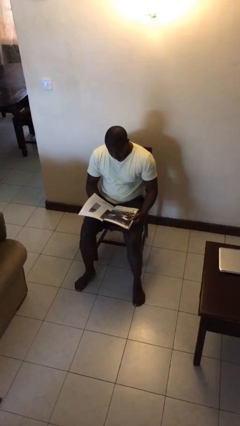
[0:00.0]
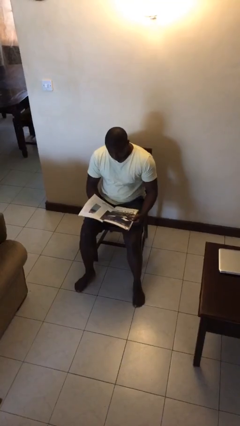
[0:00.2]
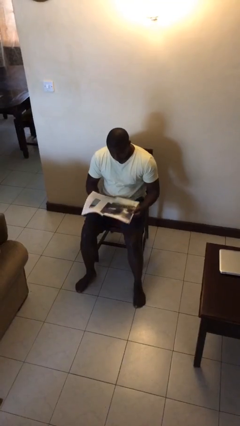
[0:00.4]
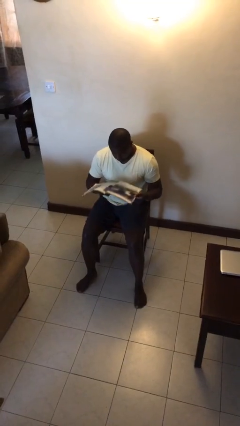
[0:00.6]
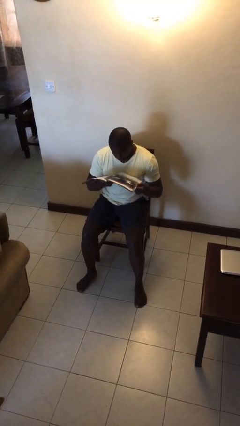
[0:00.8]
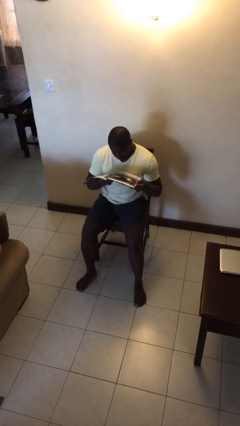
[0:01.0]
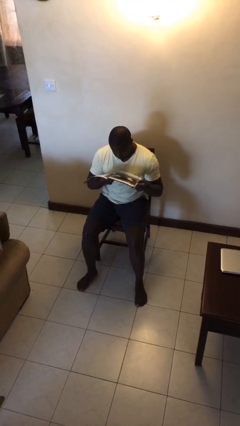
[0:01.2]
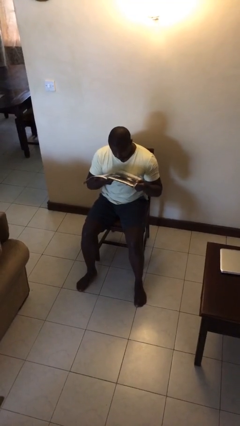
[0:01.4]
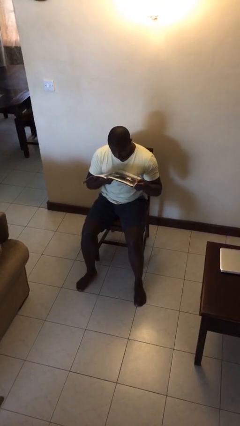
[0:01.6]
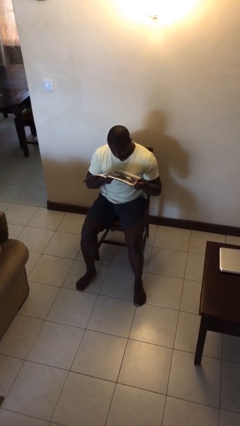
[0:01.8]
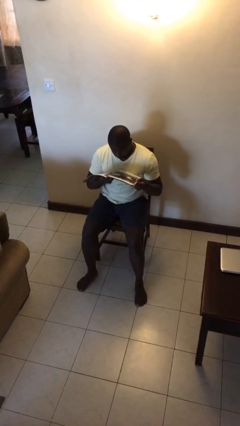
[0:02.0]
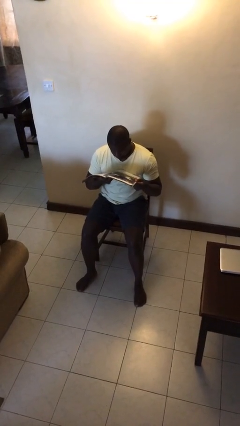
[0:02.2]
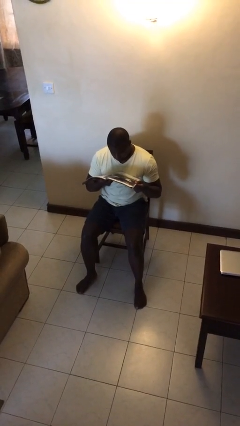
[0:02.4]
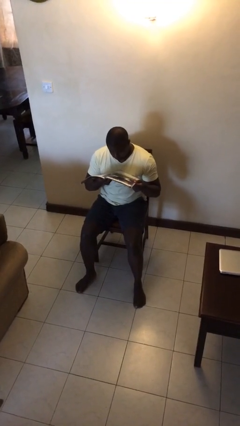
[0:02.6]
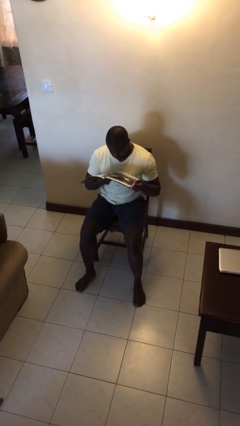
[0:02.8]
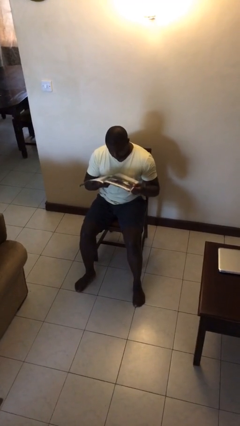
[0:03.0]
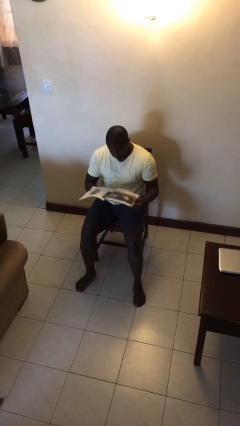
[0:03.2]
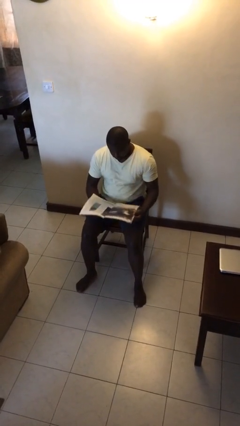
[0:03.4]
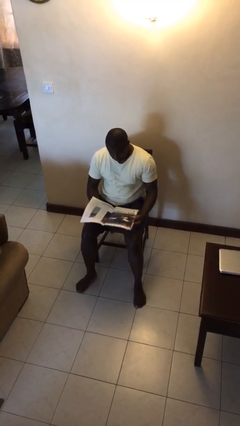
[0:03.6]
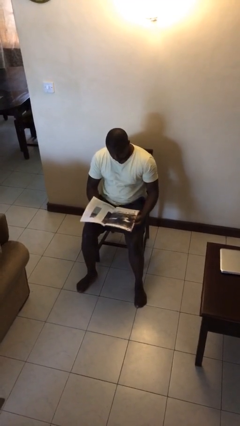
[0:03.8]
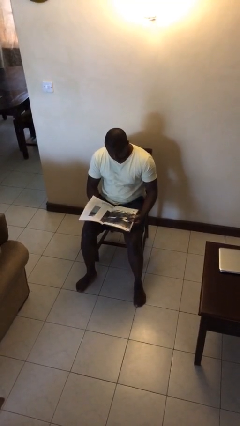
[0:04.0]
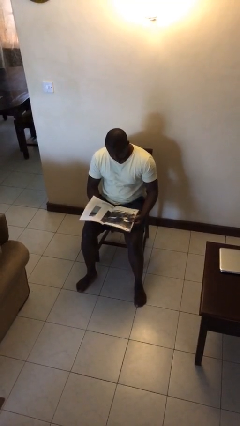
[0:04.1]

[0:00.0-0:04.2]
person reads document

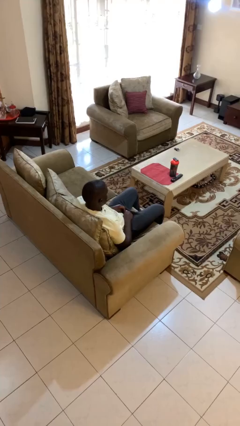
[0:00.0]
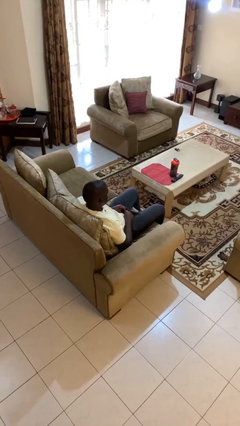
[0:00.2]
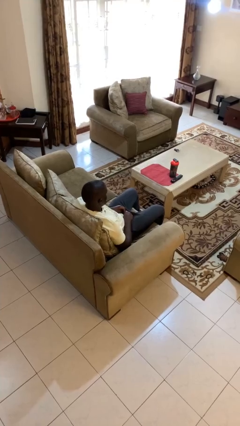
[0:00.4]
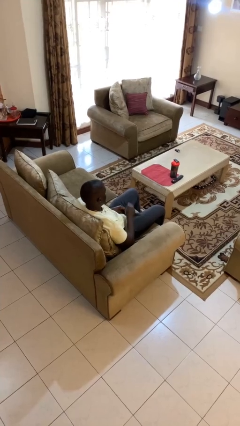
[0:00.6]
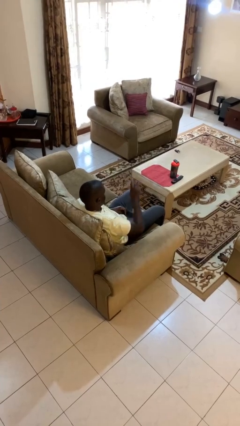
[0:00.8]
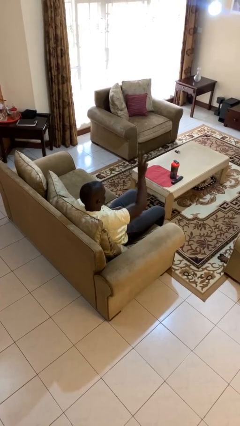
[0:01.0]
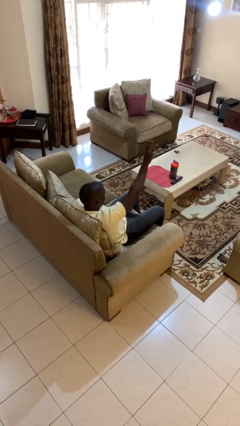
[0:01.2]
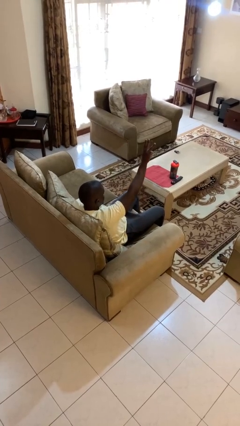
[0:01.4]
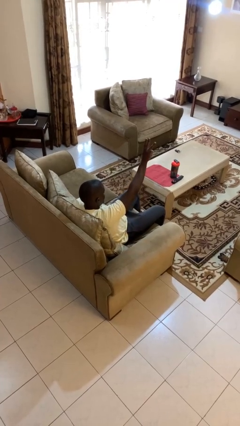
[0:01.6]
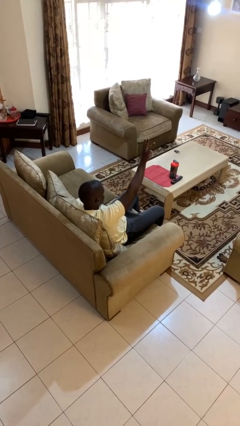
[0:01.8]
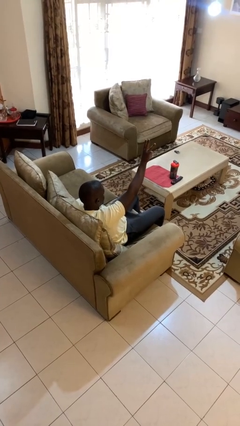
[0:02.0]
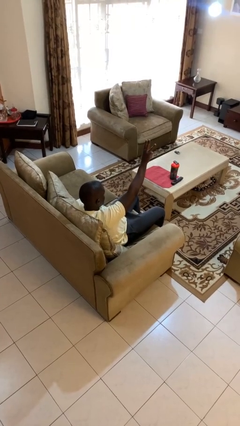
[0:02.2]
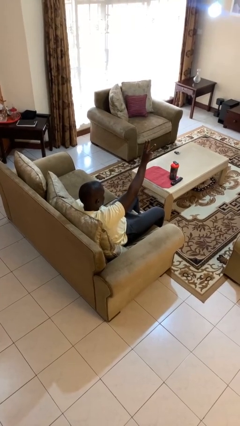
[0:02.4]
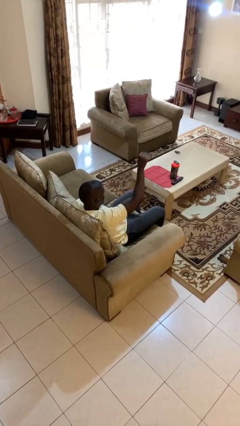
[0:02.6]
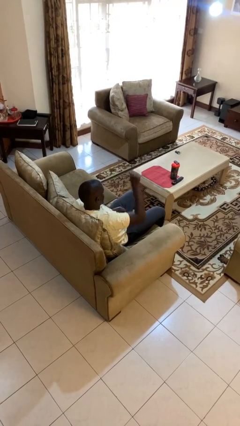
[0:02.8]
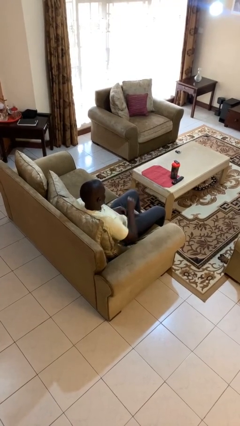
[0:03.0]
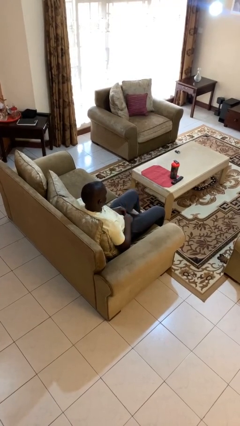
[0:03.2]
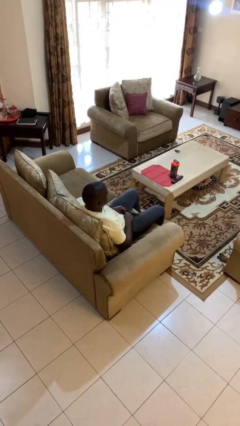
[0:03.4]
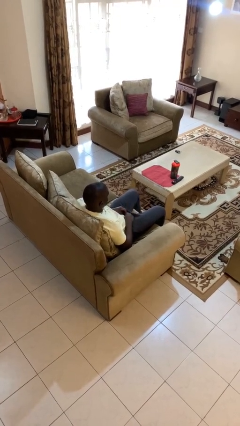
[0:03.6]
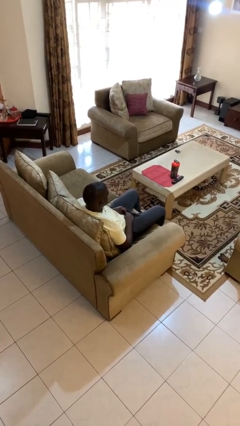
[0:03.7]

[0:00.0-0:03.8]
person gestures number three

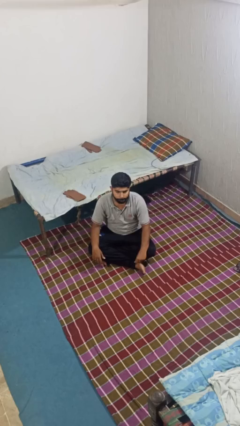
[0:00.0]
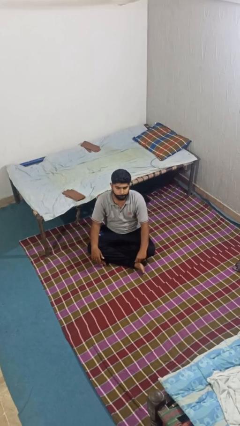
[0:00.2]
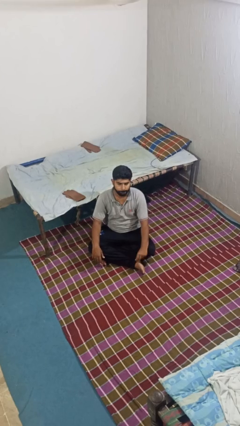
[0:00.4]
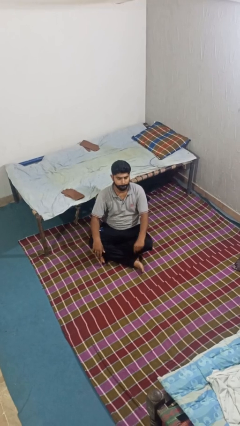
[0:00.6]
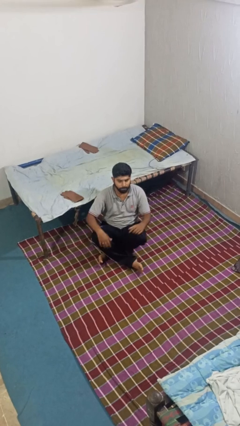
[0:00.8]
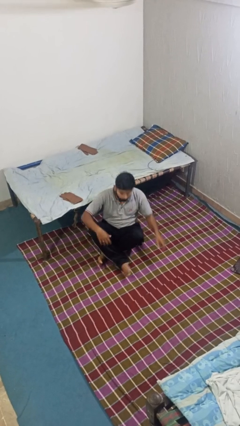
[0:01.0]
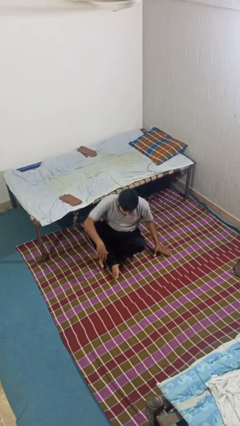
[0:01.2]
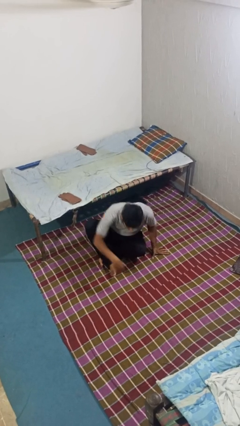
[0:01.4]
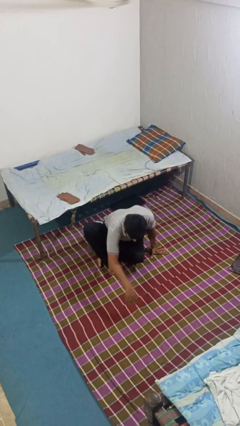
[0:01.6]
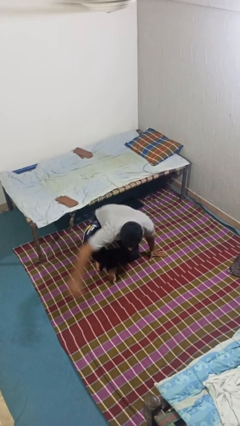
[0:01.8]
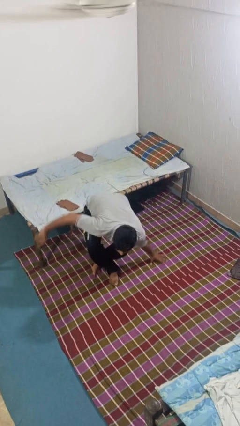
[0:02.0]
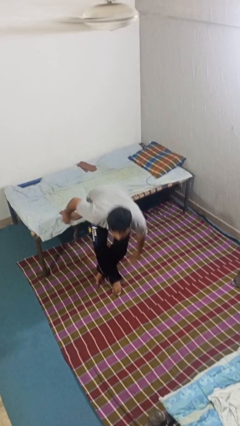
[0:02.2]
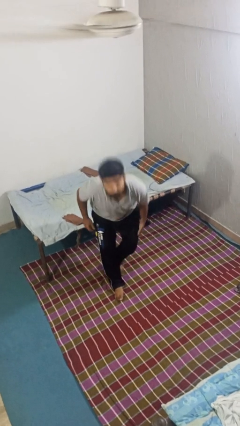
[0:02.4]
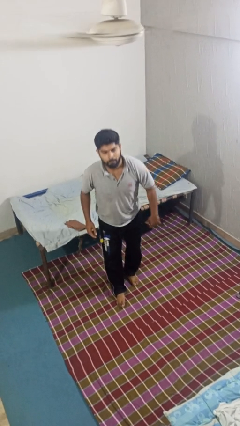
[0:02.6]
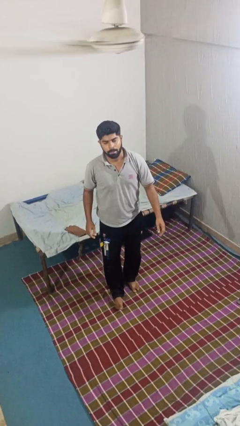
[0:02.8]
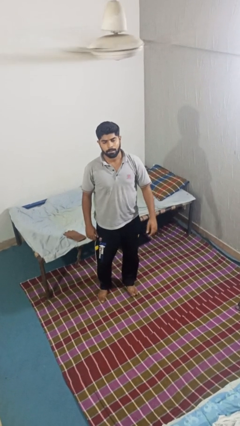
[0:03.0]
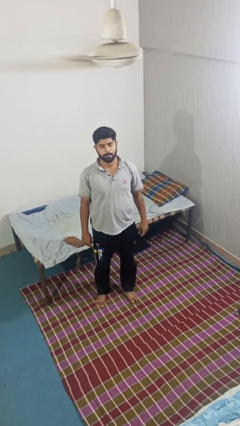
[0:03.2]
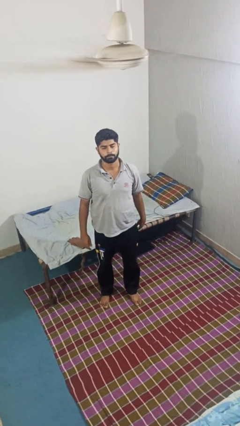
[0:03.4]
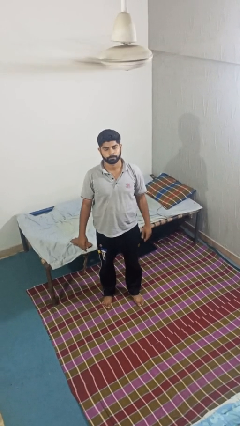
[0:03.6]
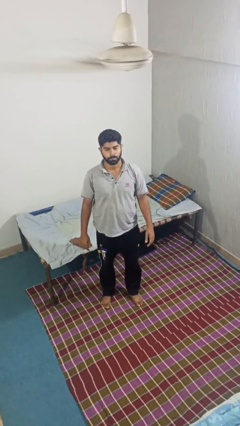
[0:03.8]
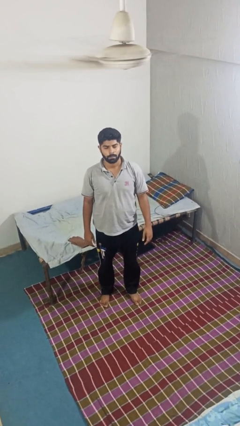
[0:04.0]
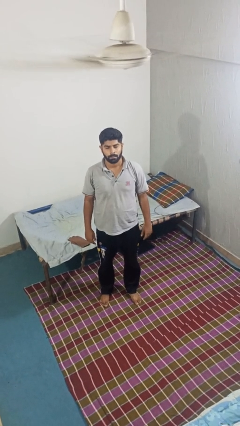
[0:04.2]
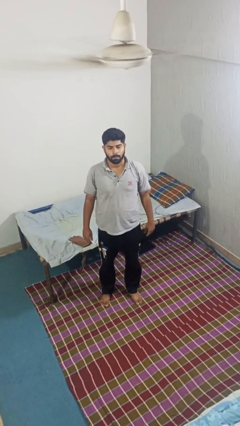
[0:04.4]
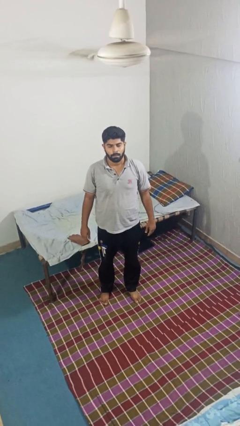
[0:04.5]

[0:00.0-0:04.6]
person stands up from floor

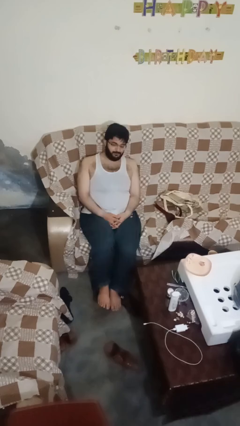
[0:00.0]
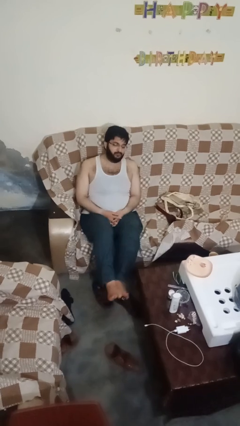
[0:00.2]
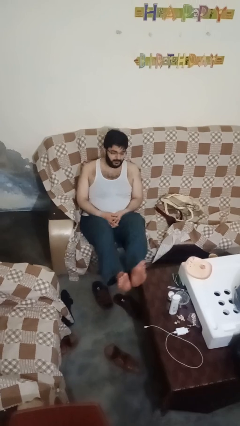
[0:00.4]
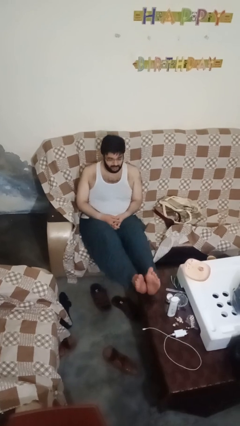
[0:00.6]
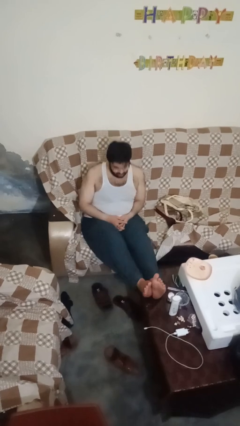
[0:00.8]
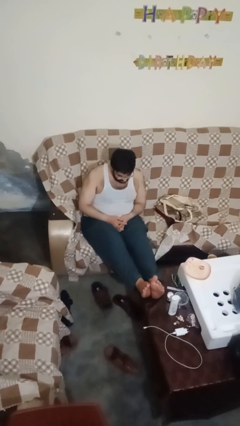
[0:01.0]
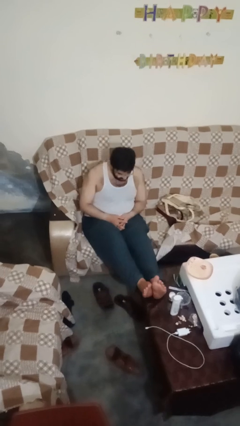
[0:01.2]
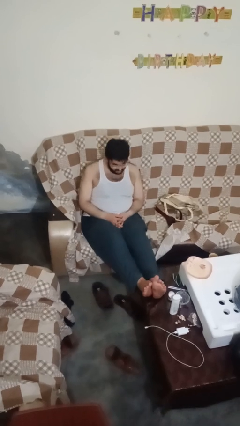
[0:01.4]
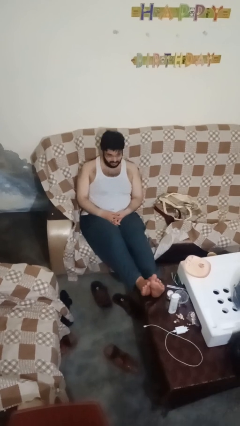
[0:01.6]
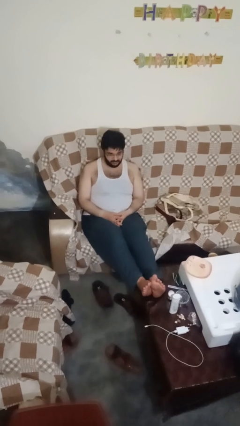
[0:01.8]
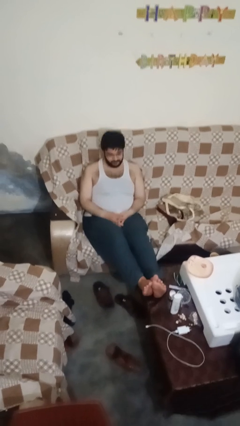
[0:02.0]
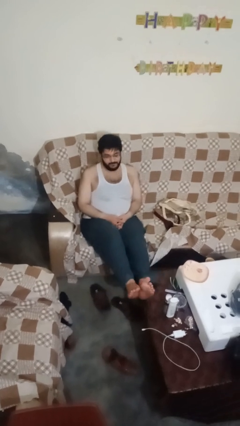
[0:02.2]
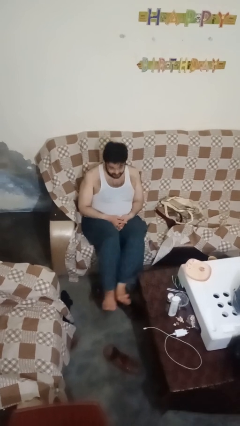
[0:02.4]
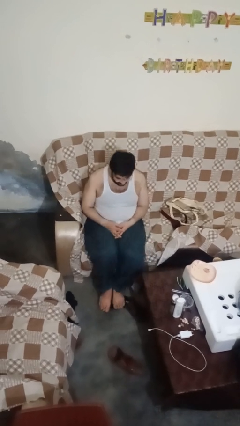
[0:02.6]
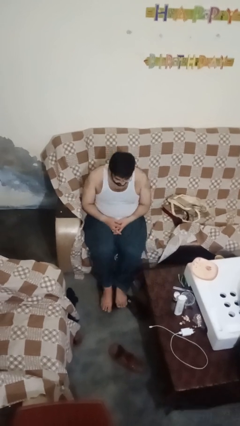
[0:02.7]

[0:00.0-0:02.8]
person puts feet up

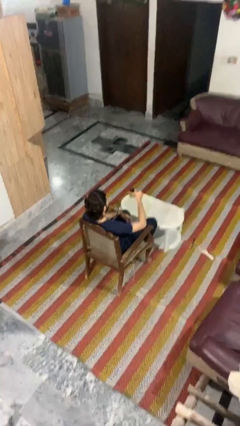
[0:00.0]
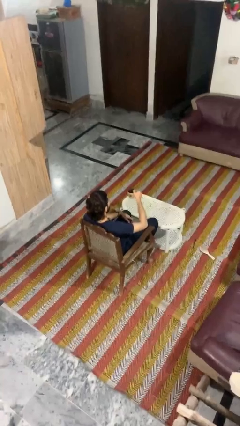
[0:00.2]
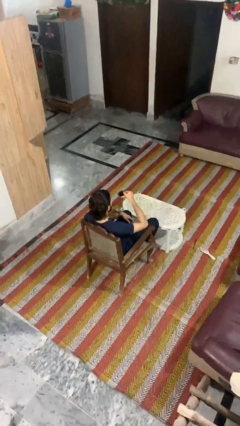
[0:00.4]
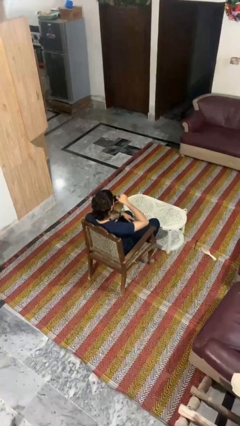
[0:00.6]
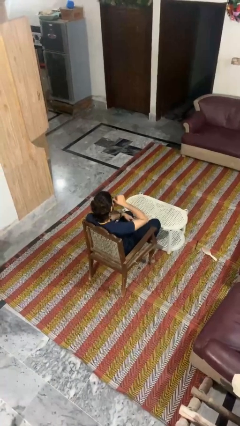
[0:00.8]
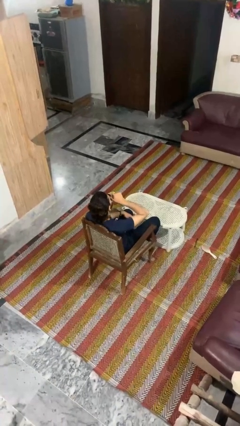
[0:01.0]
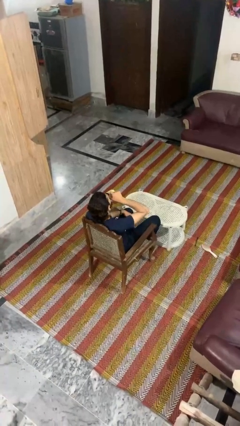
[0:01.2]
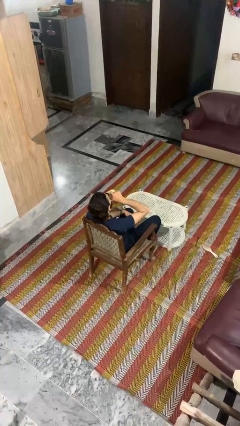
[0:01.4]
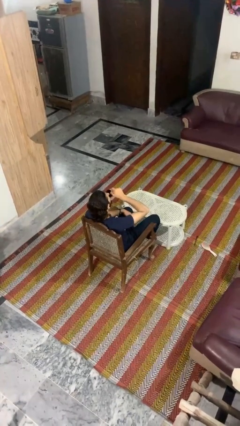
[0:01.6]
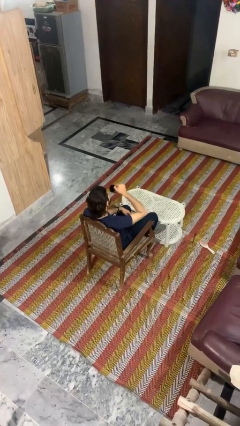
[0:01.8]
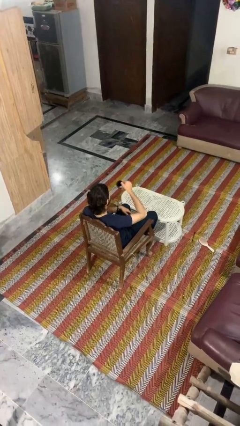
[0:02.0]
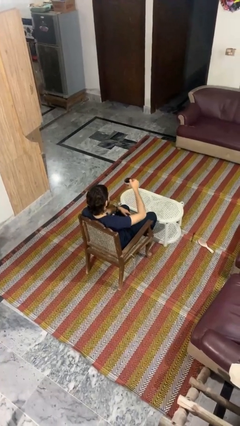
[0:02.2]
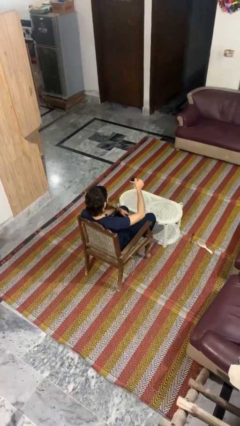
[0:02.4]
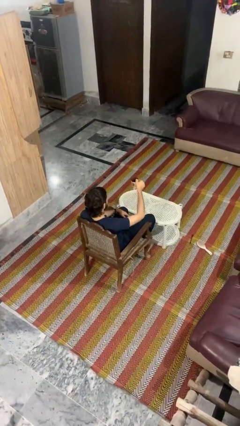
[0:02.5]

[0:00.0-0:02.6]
person drinks from mug
